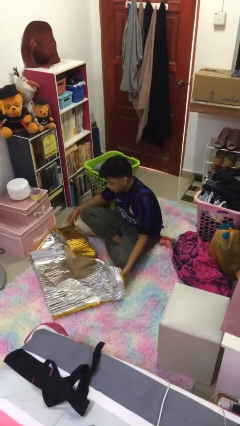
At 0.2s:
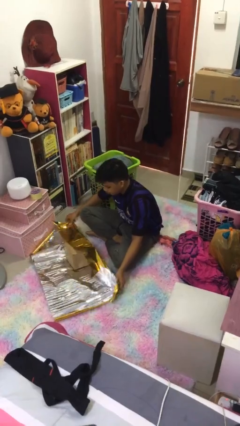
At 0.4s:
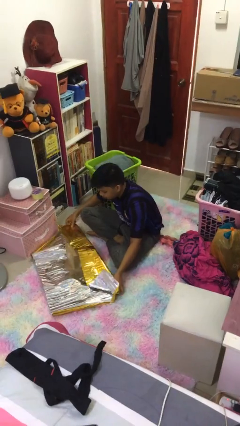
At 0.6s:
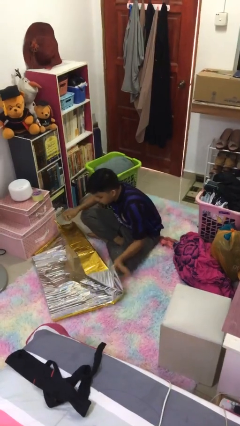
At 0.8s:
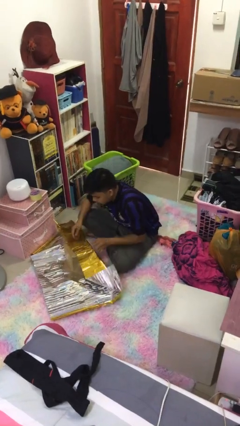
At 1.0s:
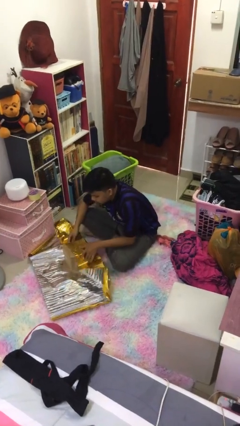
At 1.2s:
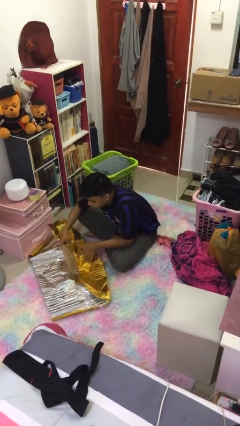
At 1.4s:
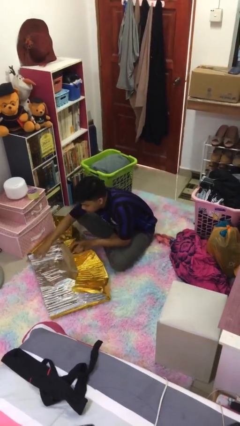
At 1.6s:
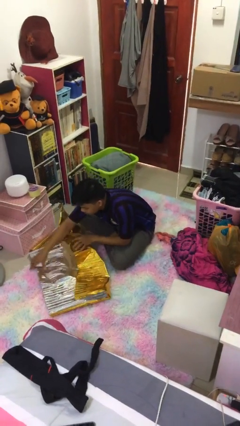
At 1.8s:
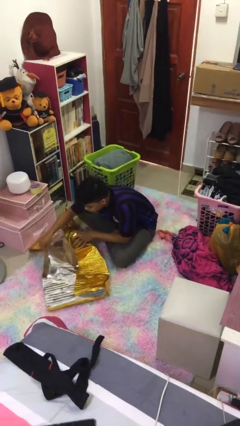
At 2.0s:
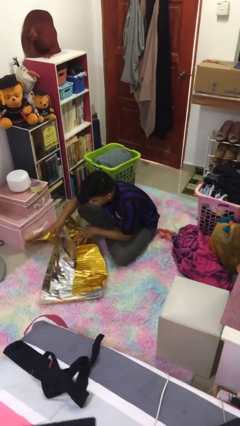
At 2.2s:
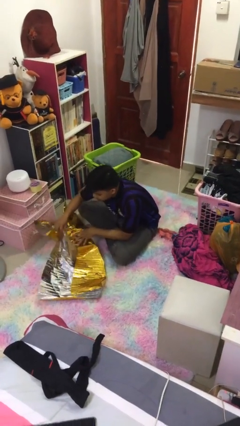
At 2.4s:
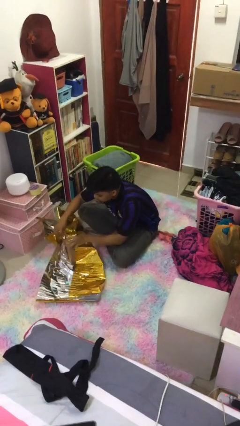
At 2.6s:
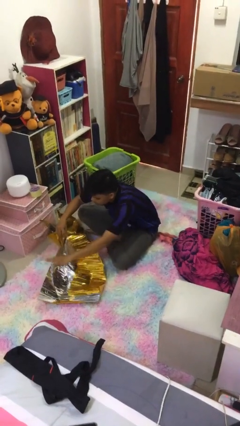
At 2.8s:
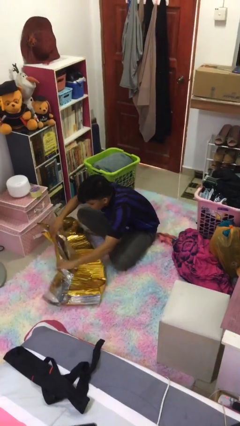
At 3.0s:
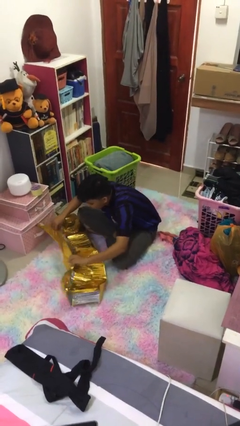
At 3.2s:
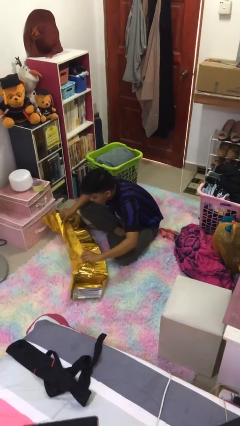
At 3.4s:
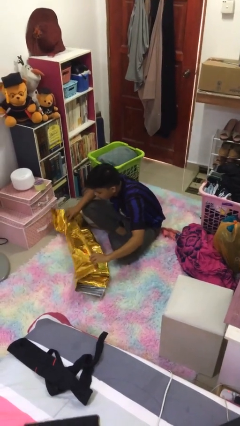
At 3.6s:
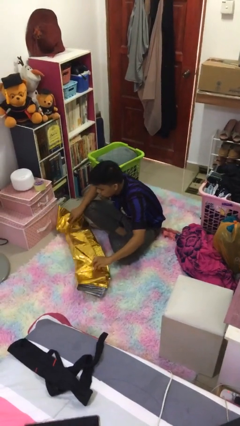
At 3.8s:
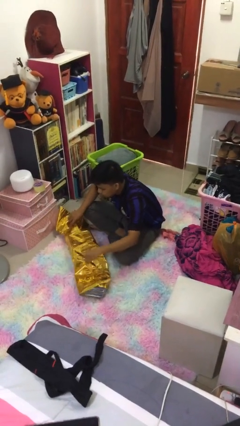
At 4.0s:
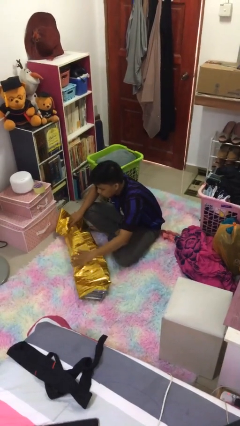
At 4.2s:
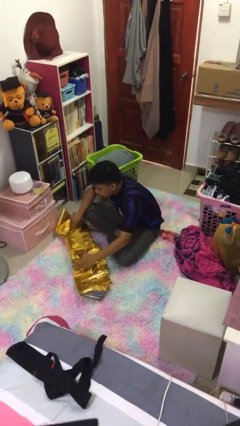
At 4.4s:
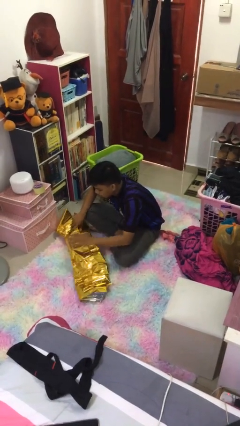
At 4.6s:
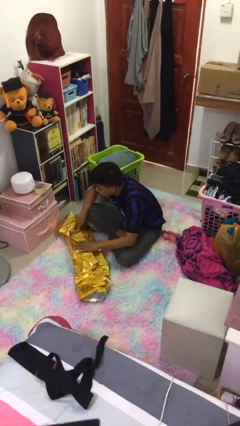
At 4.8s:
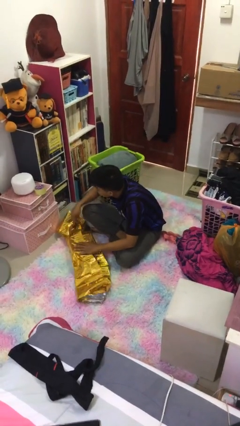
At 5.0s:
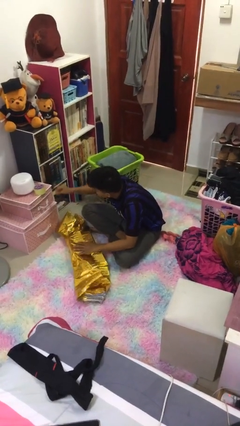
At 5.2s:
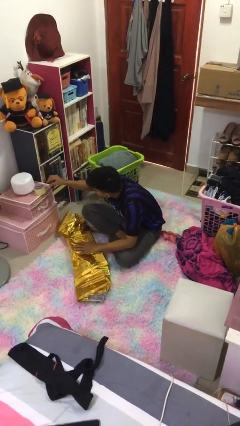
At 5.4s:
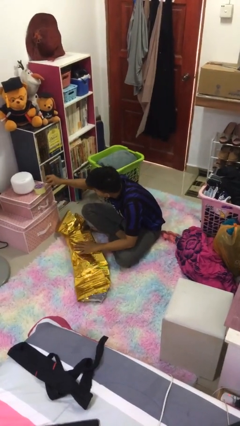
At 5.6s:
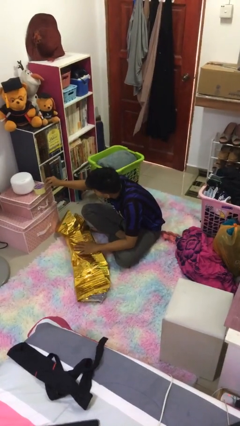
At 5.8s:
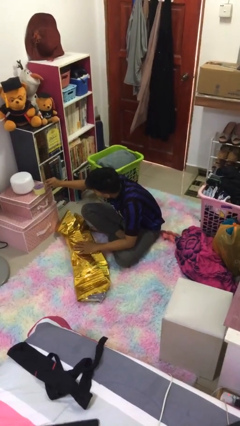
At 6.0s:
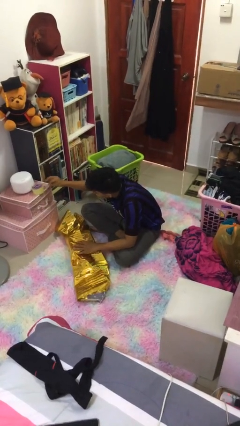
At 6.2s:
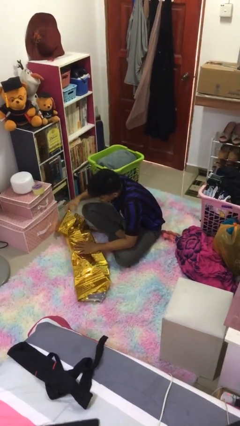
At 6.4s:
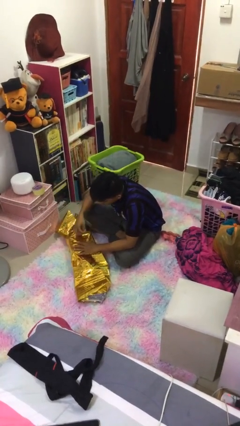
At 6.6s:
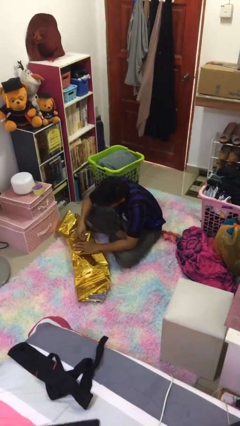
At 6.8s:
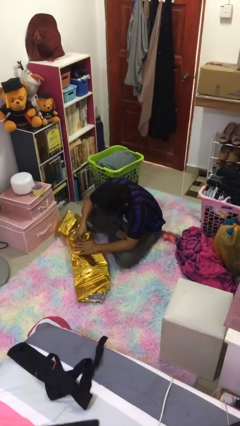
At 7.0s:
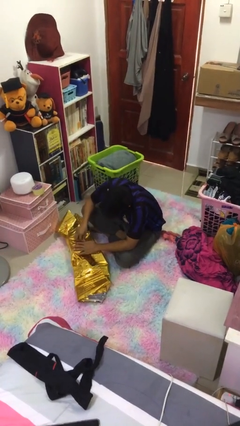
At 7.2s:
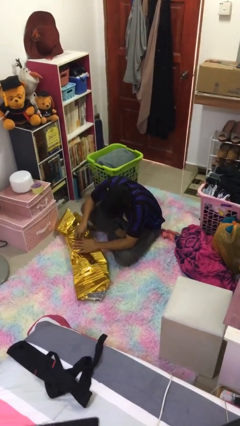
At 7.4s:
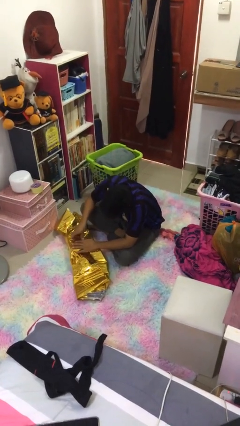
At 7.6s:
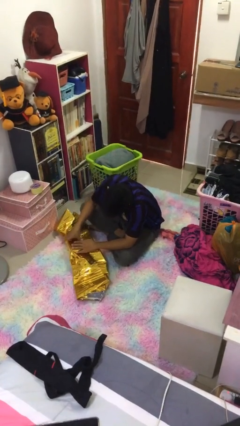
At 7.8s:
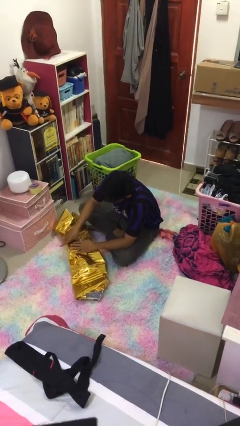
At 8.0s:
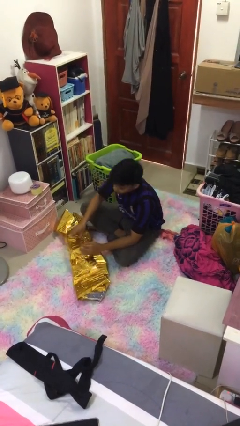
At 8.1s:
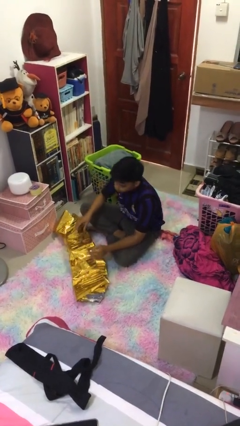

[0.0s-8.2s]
person wraps box

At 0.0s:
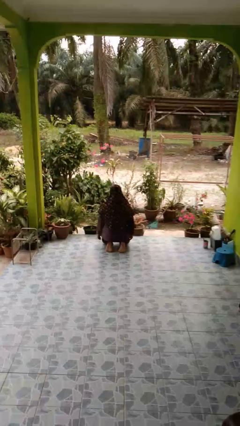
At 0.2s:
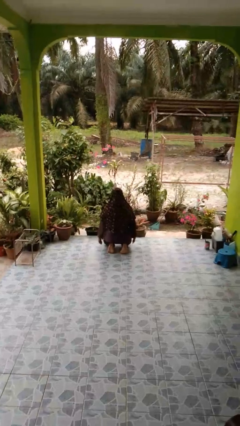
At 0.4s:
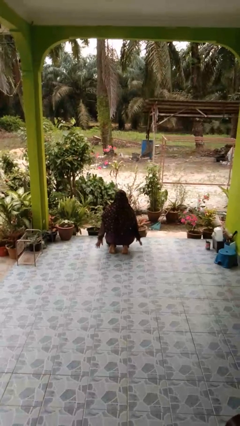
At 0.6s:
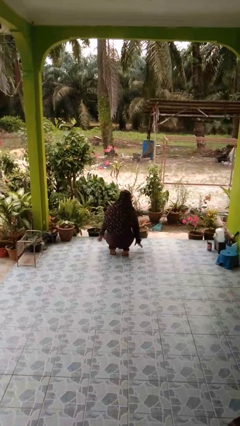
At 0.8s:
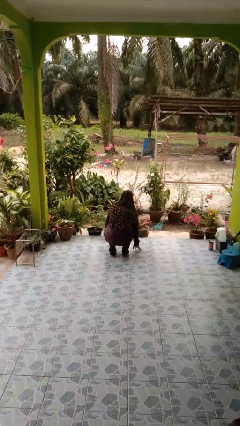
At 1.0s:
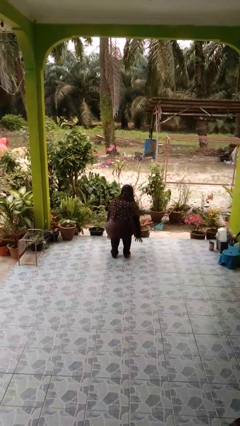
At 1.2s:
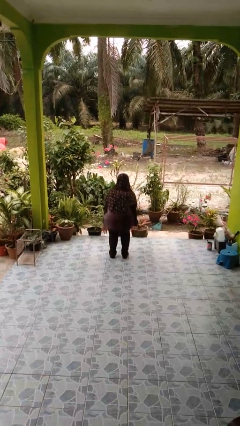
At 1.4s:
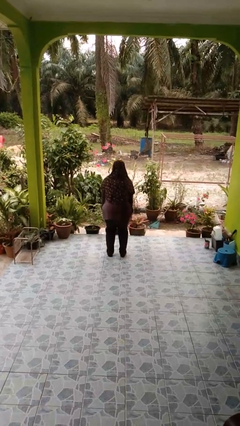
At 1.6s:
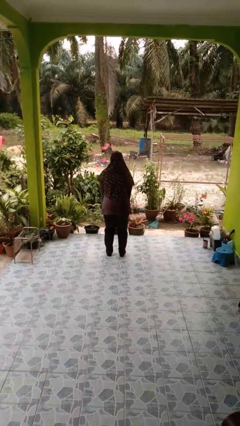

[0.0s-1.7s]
person stands up from floor

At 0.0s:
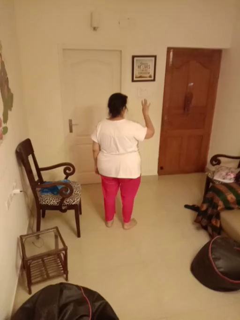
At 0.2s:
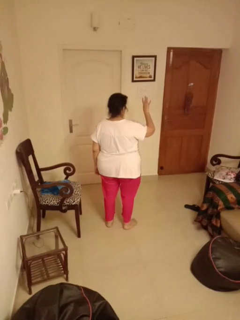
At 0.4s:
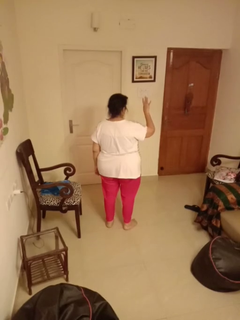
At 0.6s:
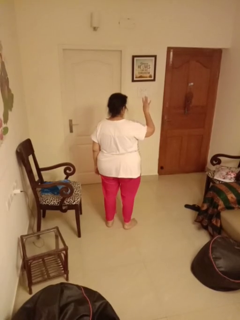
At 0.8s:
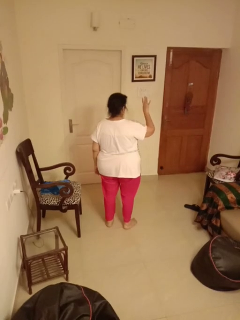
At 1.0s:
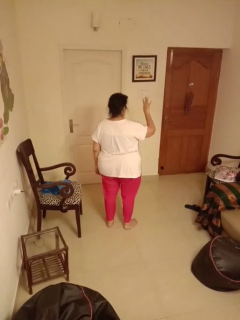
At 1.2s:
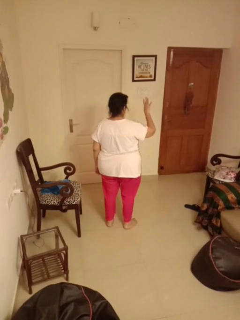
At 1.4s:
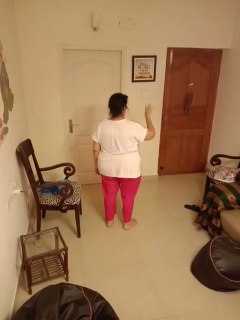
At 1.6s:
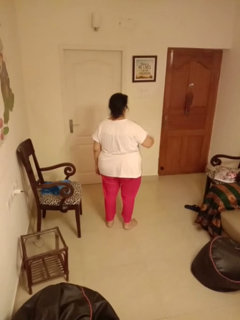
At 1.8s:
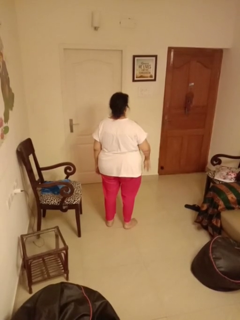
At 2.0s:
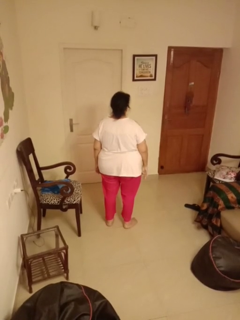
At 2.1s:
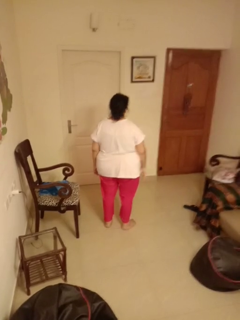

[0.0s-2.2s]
person gestures number four

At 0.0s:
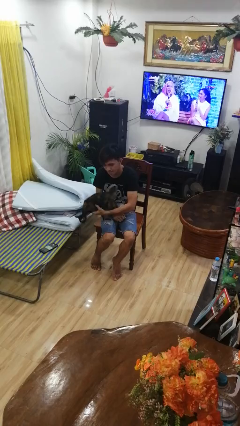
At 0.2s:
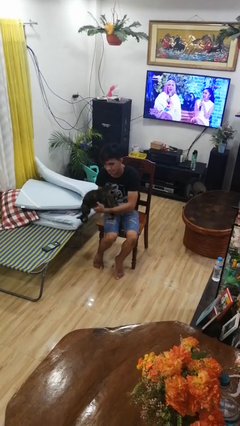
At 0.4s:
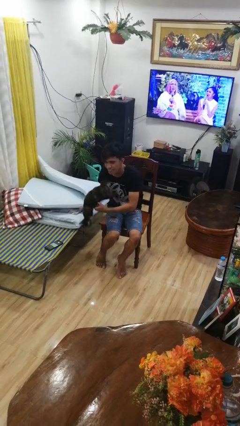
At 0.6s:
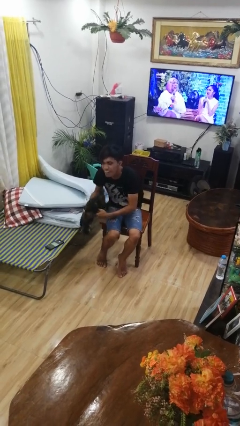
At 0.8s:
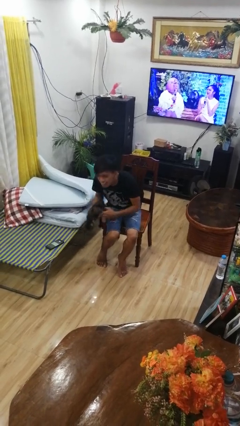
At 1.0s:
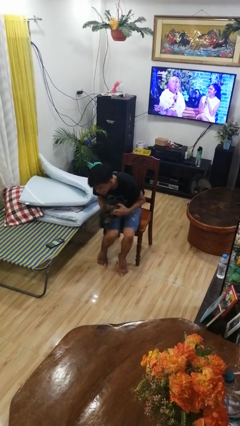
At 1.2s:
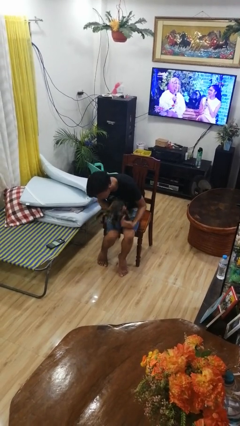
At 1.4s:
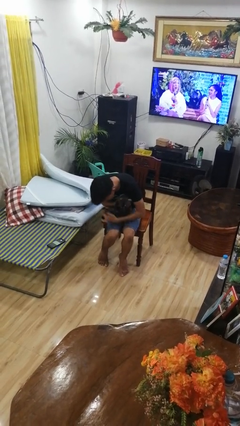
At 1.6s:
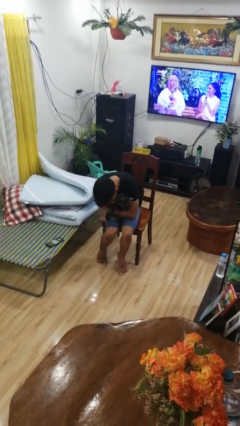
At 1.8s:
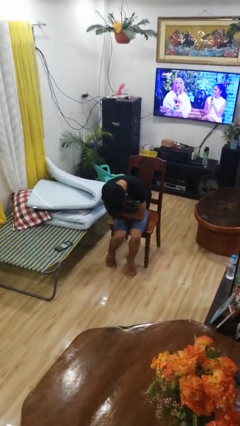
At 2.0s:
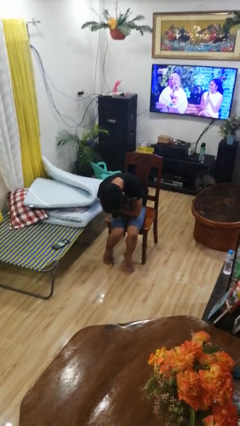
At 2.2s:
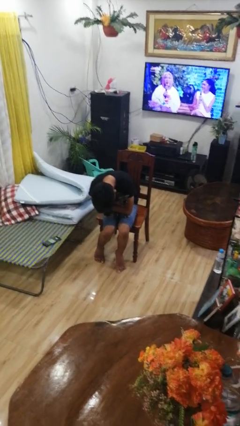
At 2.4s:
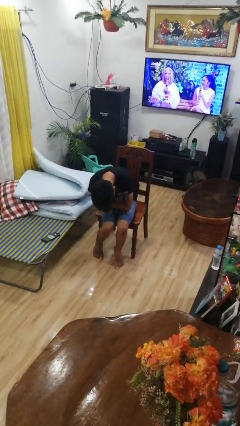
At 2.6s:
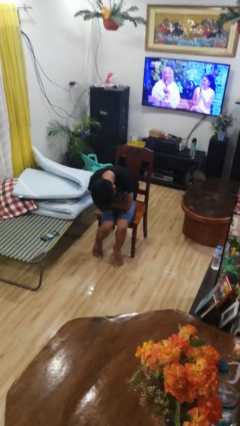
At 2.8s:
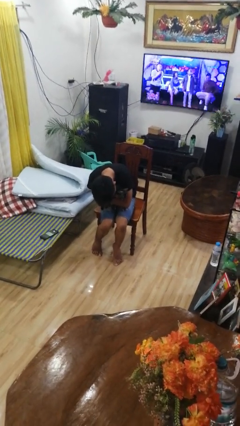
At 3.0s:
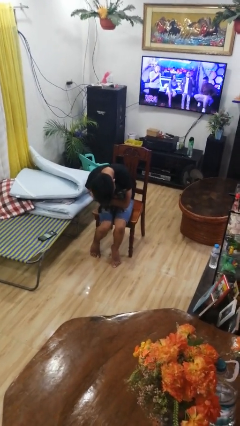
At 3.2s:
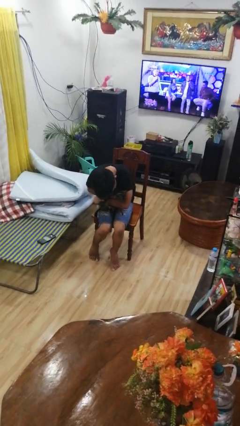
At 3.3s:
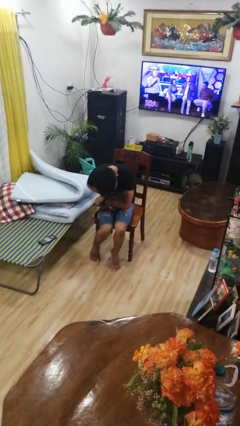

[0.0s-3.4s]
person hugs cat

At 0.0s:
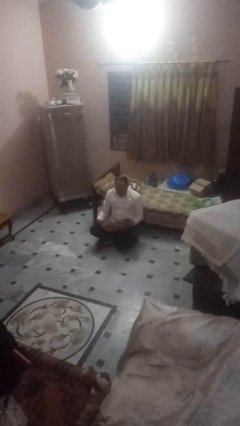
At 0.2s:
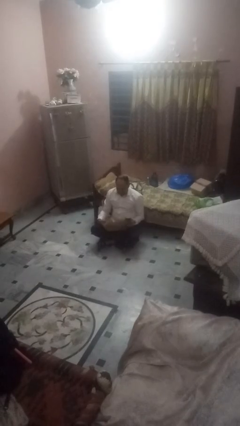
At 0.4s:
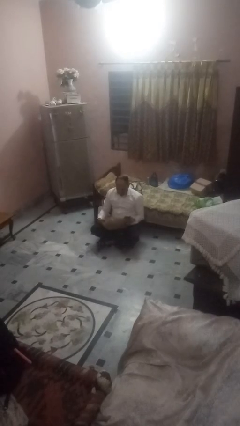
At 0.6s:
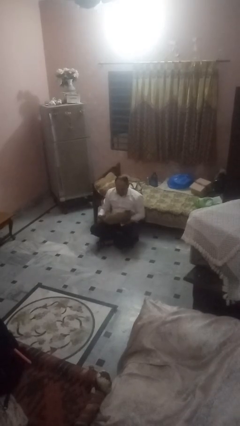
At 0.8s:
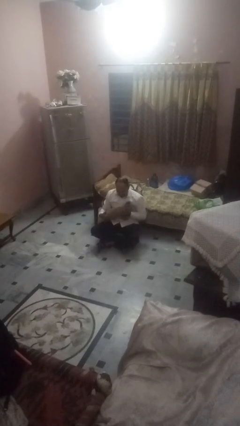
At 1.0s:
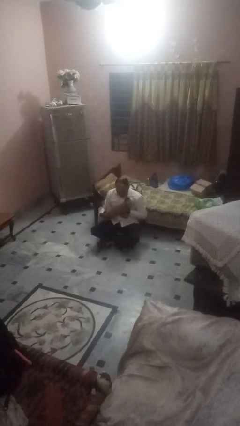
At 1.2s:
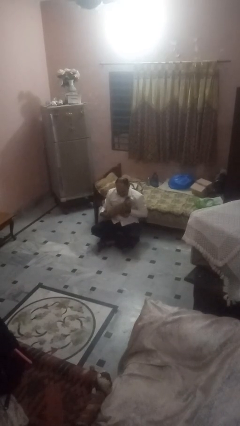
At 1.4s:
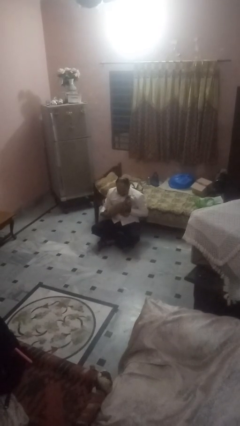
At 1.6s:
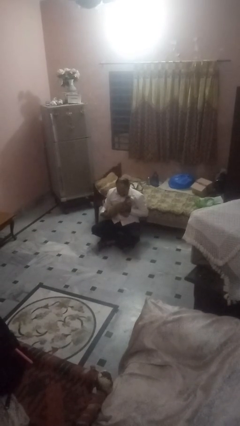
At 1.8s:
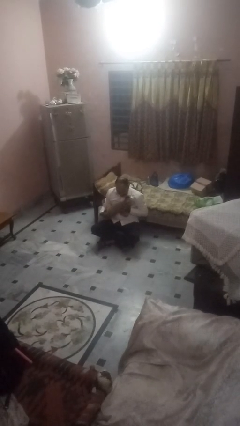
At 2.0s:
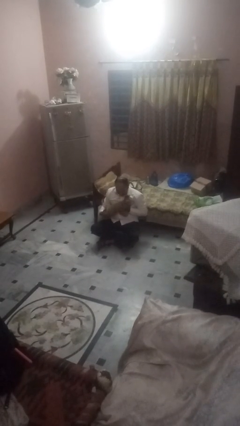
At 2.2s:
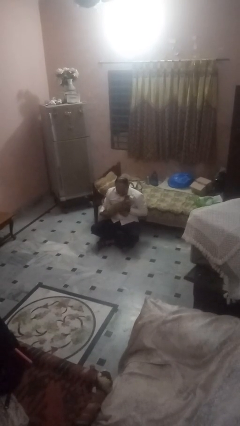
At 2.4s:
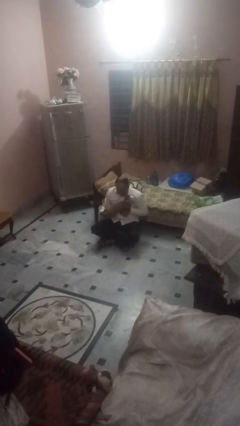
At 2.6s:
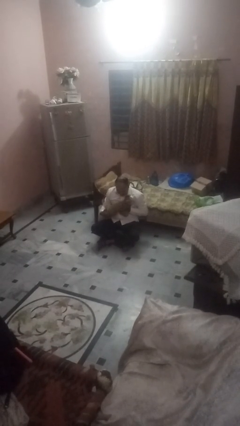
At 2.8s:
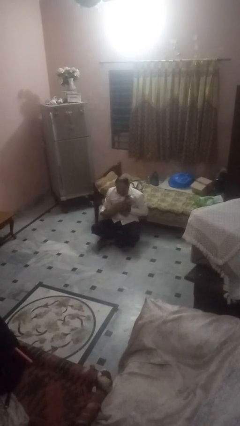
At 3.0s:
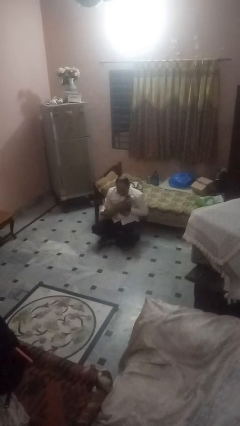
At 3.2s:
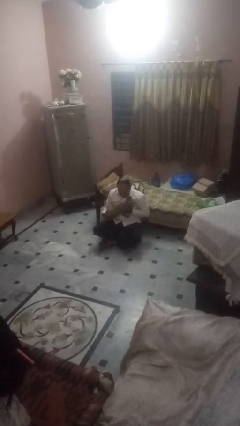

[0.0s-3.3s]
person hugs dog
